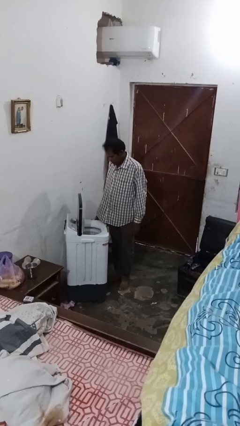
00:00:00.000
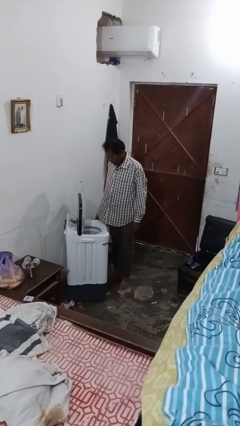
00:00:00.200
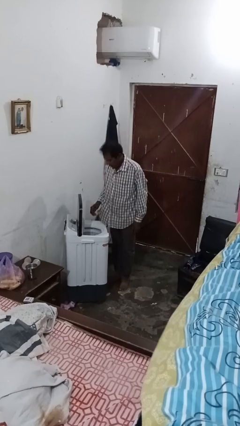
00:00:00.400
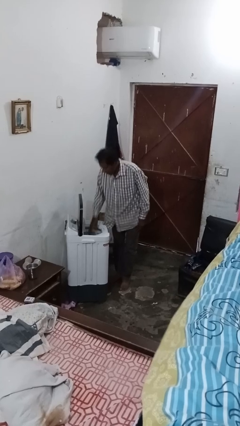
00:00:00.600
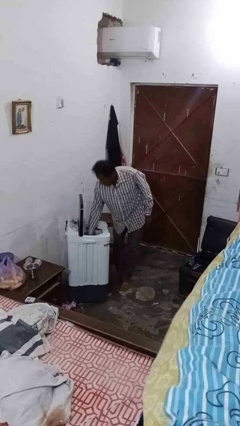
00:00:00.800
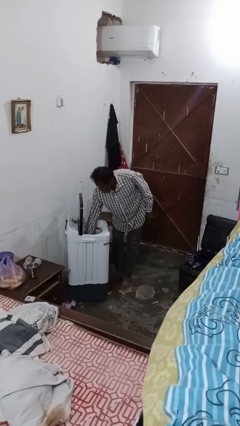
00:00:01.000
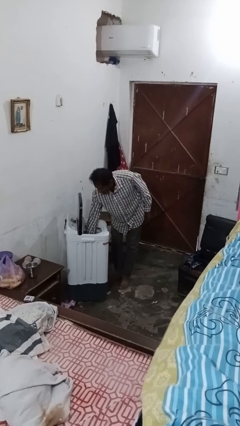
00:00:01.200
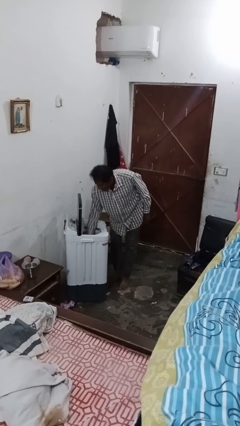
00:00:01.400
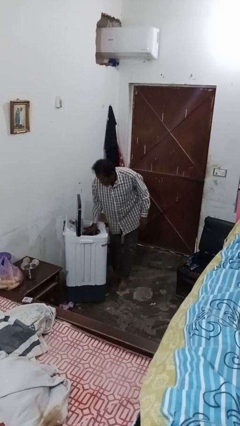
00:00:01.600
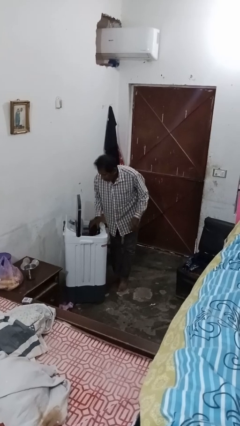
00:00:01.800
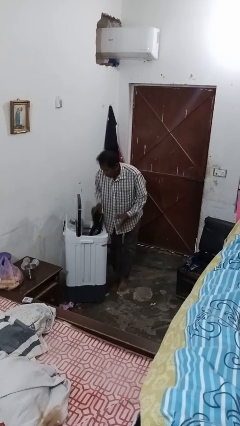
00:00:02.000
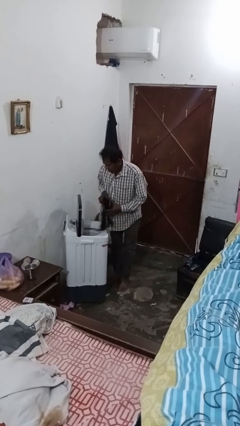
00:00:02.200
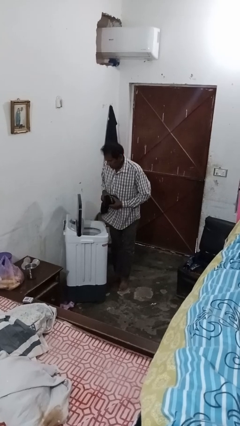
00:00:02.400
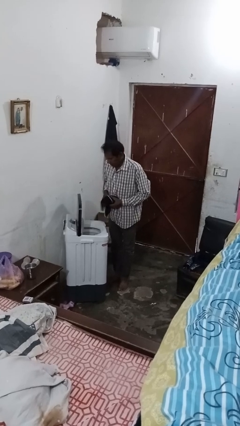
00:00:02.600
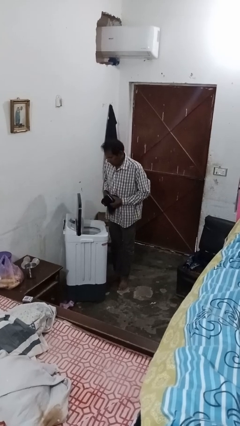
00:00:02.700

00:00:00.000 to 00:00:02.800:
person unloads clotheswasher

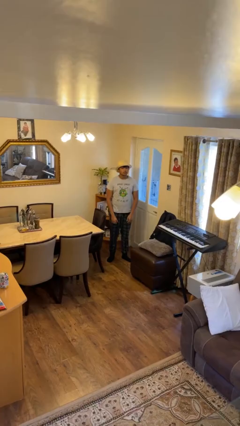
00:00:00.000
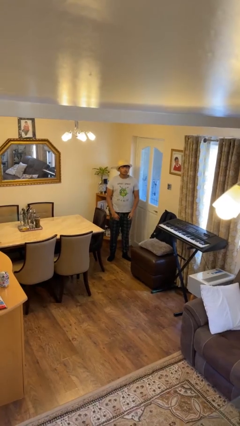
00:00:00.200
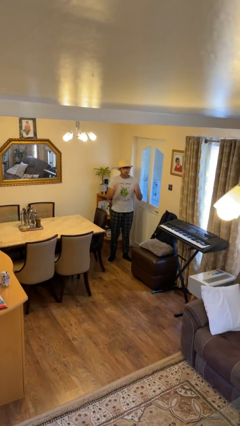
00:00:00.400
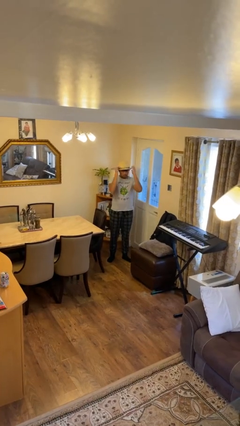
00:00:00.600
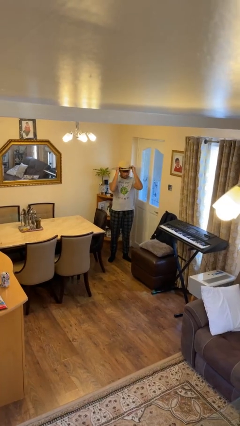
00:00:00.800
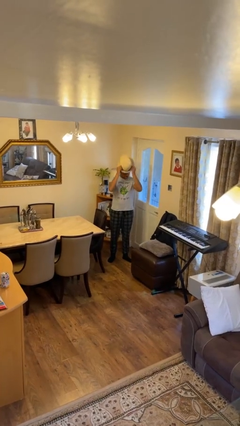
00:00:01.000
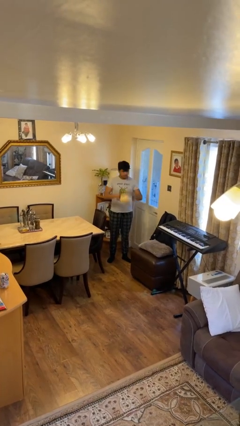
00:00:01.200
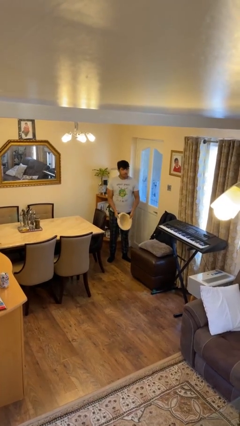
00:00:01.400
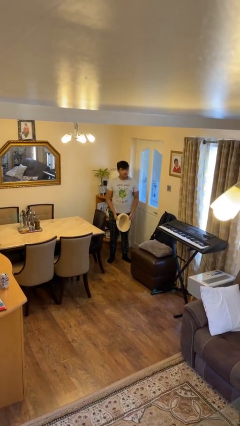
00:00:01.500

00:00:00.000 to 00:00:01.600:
person takes off hat

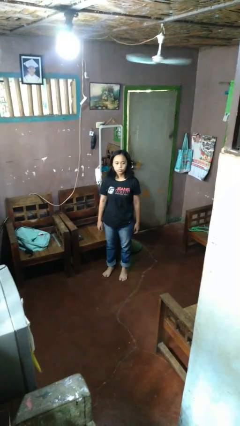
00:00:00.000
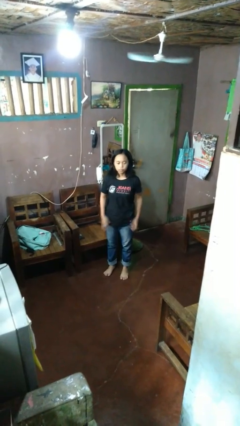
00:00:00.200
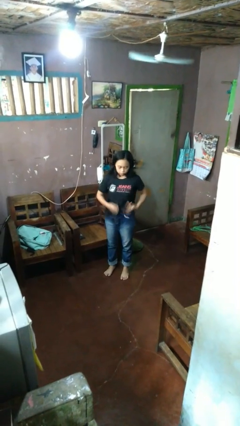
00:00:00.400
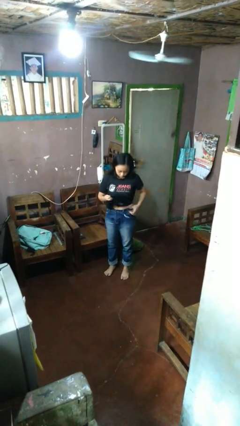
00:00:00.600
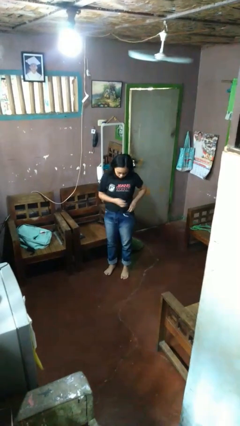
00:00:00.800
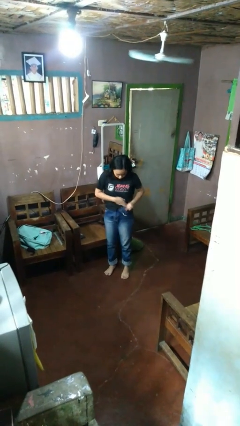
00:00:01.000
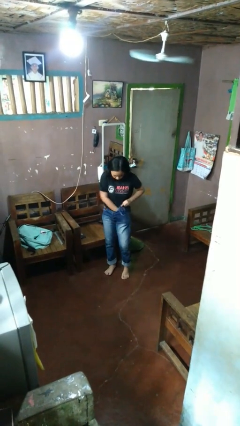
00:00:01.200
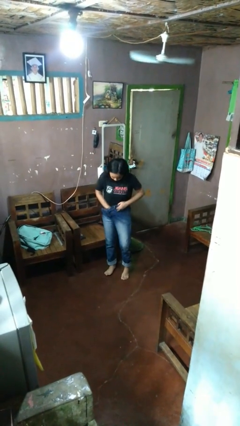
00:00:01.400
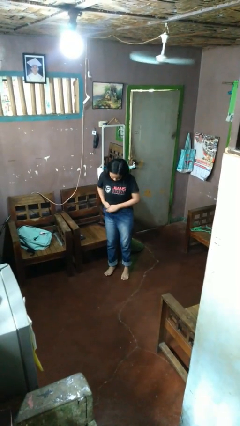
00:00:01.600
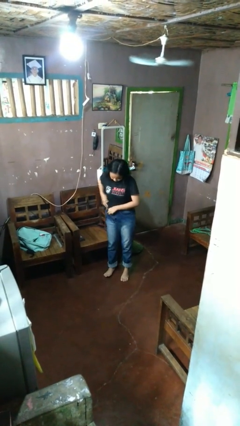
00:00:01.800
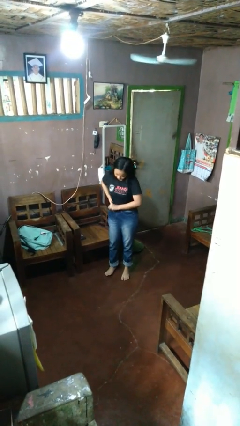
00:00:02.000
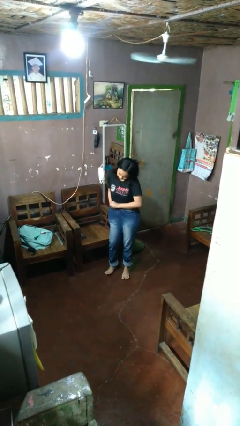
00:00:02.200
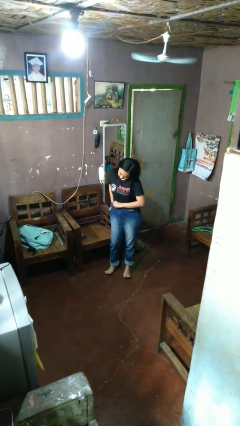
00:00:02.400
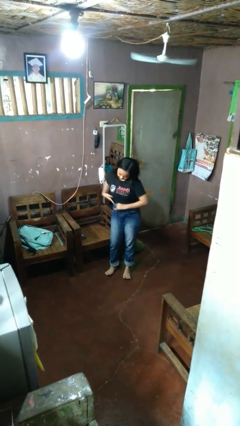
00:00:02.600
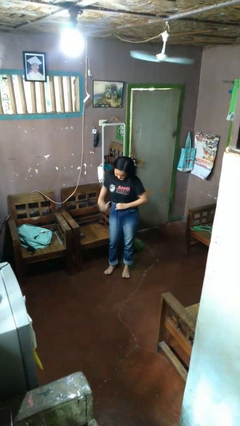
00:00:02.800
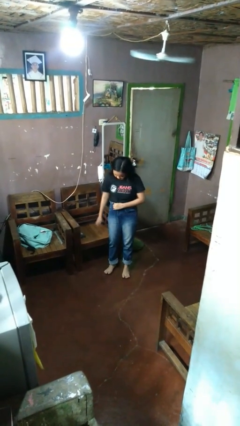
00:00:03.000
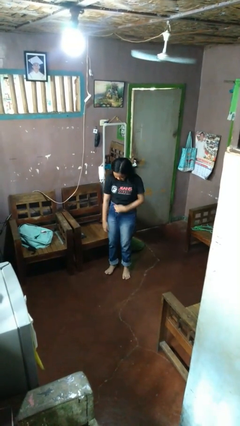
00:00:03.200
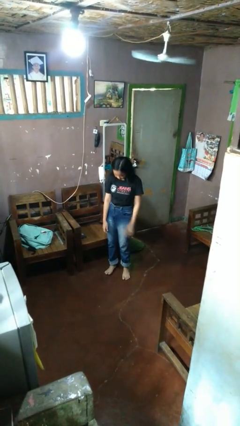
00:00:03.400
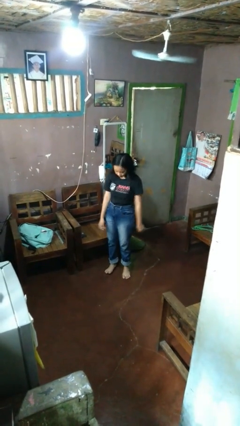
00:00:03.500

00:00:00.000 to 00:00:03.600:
person tucks in shirt

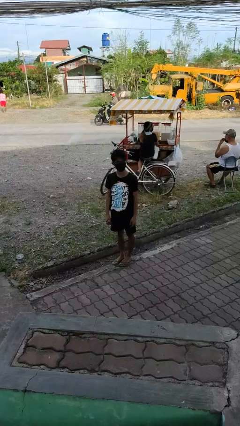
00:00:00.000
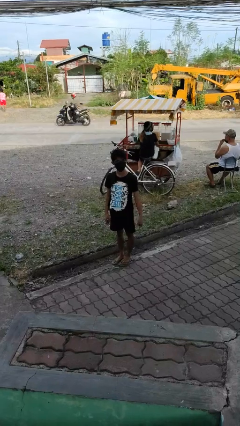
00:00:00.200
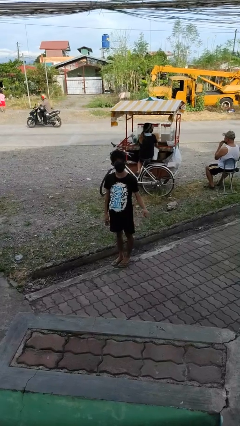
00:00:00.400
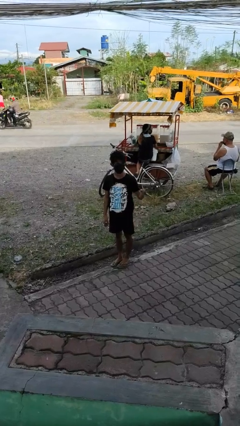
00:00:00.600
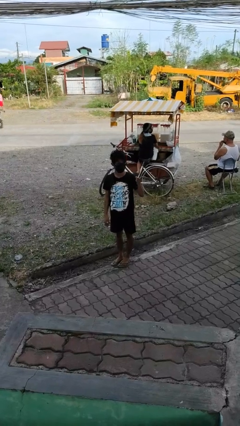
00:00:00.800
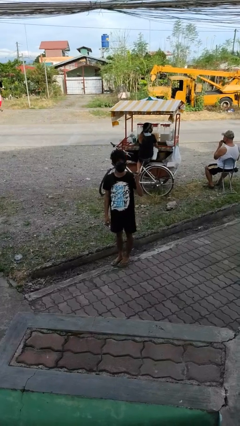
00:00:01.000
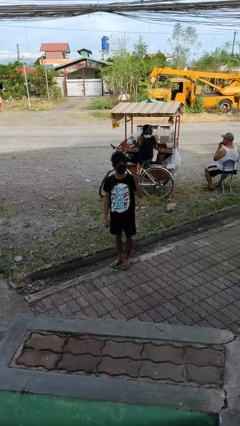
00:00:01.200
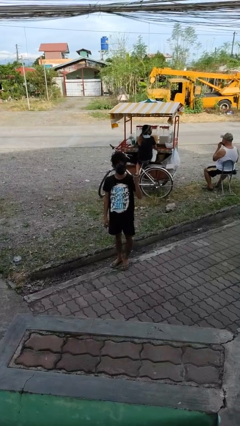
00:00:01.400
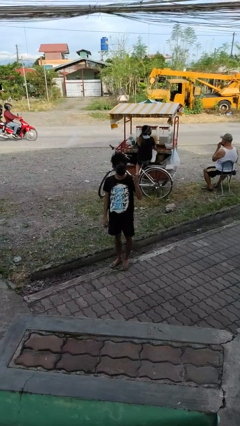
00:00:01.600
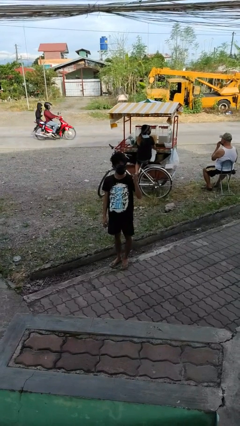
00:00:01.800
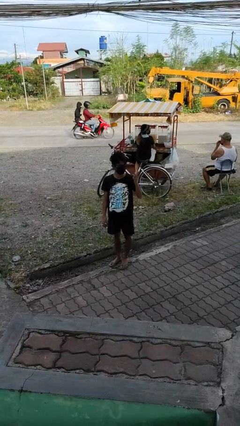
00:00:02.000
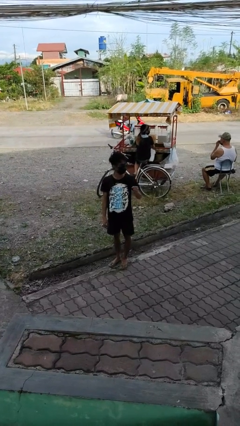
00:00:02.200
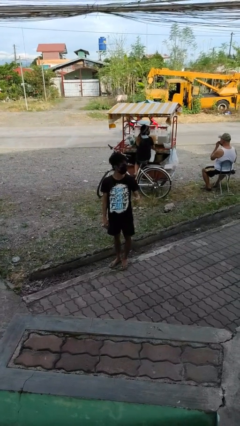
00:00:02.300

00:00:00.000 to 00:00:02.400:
person points at person

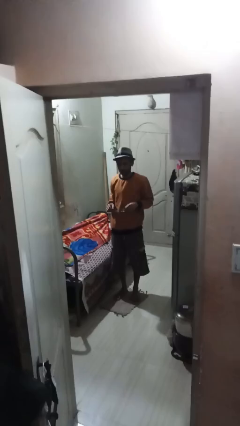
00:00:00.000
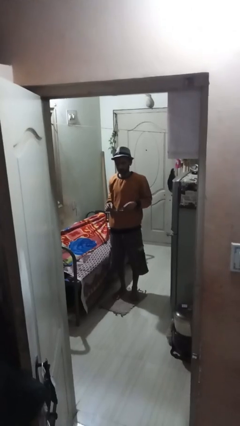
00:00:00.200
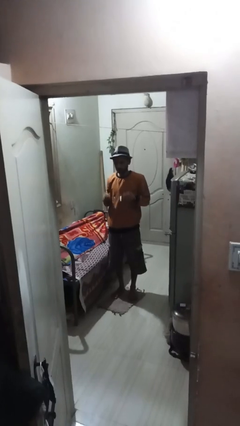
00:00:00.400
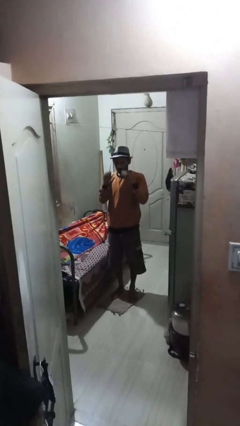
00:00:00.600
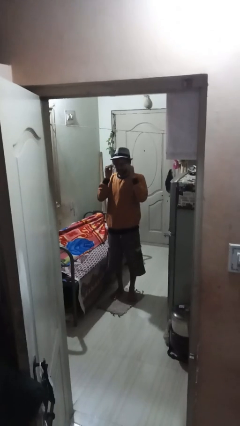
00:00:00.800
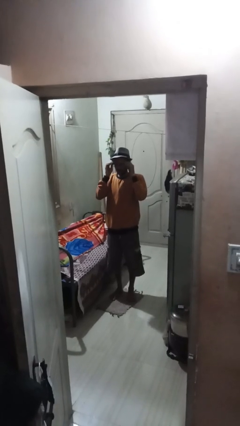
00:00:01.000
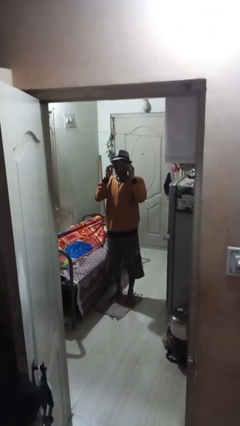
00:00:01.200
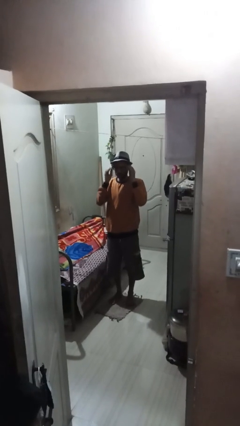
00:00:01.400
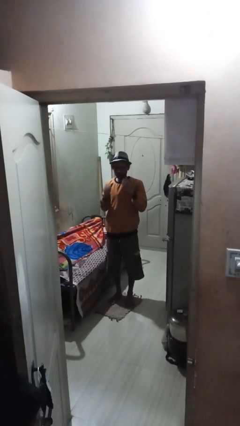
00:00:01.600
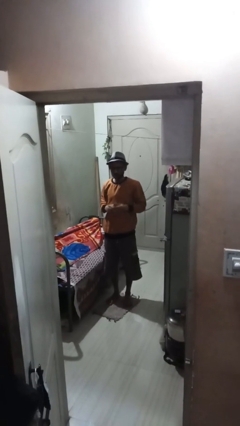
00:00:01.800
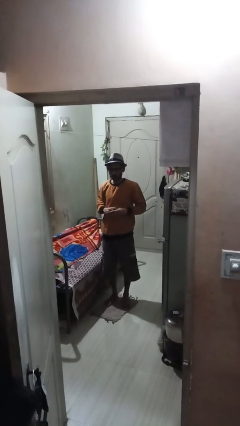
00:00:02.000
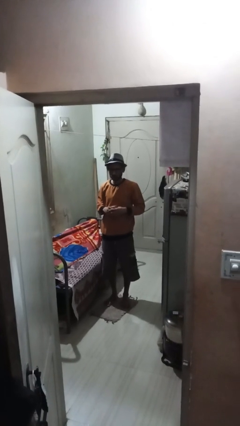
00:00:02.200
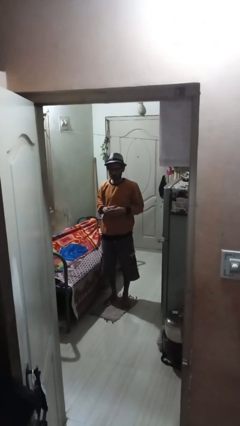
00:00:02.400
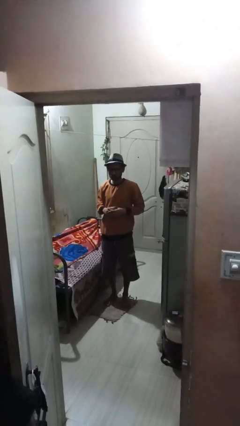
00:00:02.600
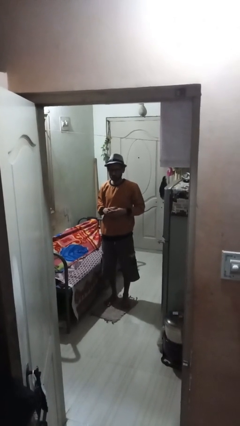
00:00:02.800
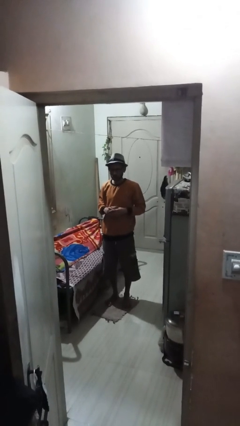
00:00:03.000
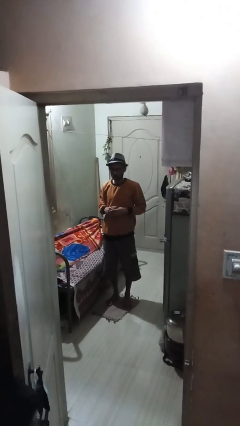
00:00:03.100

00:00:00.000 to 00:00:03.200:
person puts on glasses

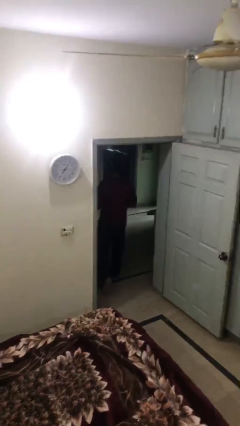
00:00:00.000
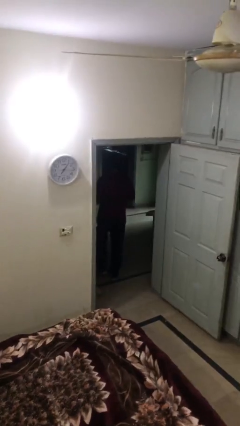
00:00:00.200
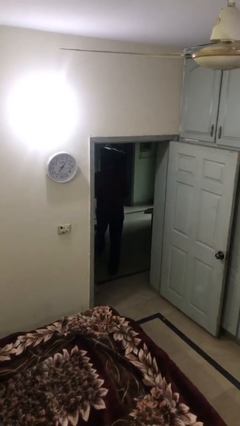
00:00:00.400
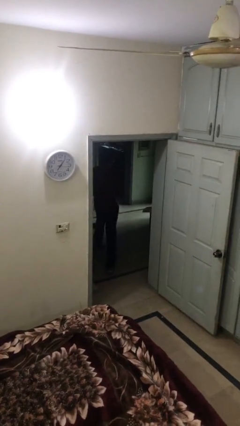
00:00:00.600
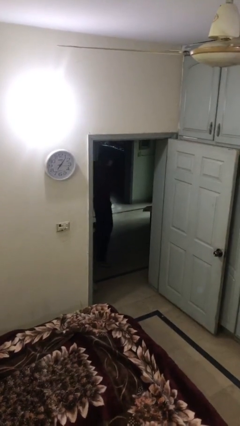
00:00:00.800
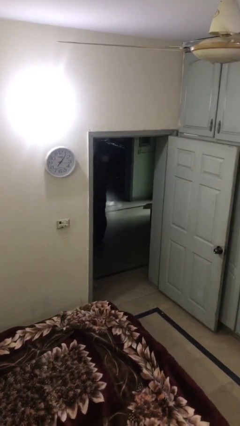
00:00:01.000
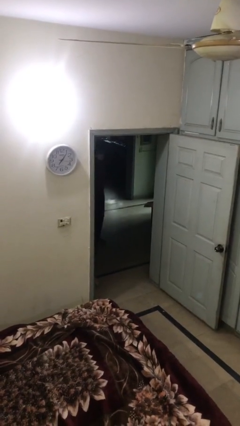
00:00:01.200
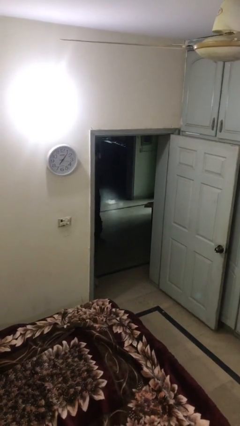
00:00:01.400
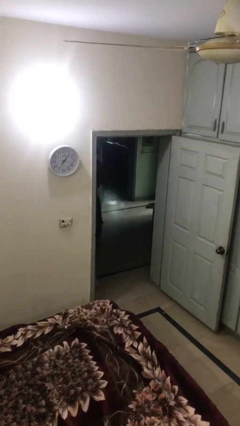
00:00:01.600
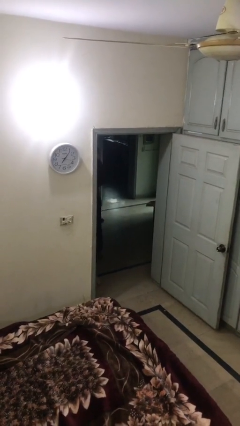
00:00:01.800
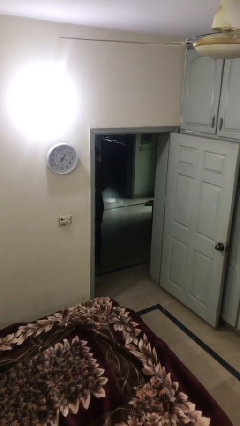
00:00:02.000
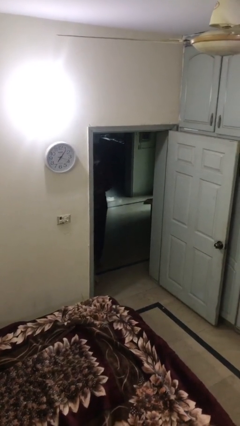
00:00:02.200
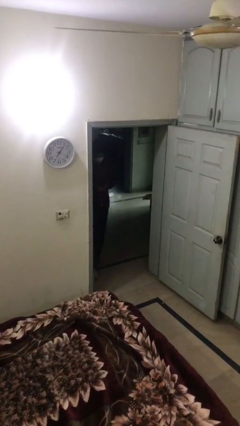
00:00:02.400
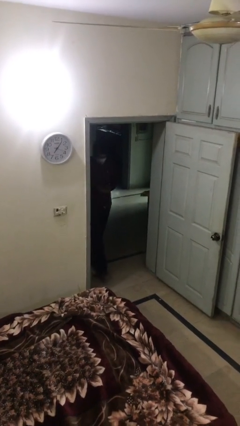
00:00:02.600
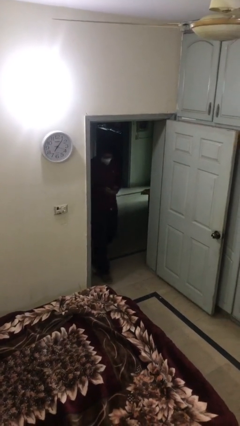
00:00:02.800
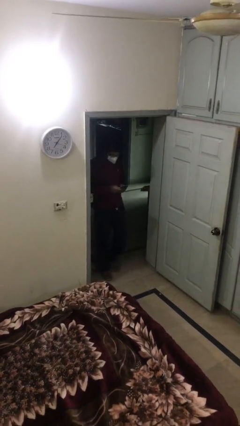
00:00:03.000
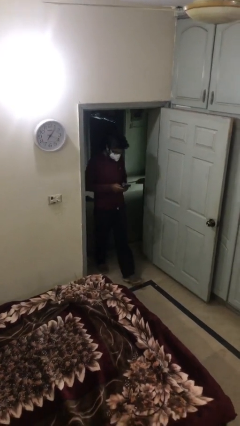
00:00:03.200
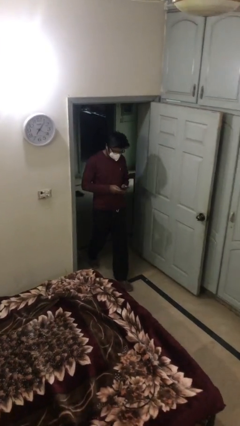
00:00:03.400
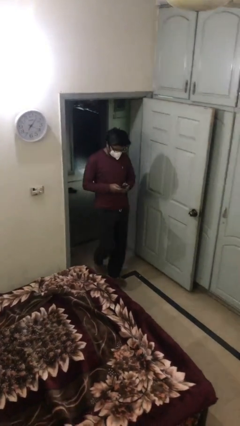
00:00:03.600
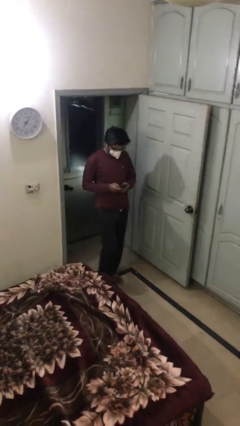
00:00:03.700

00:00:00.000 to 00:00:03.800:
person enters scene through structure
